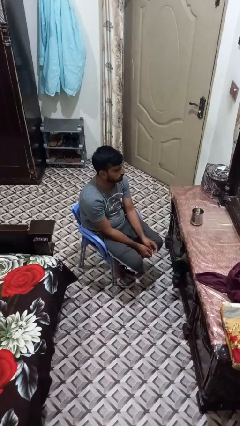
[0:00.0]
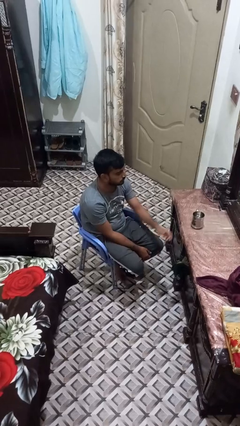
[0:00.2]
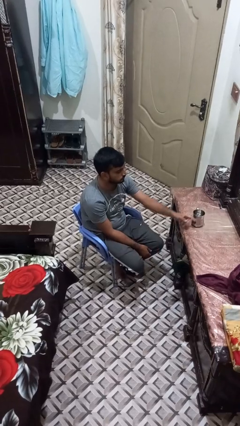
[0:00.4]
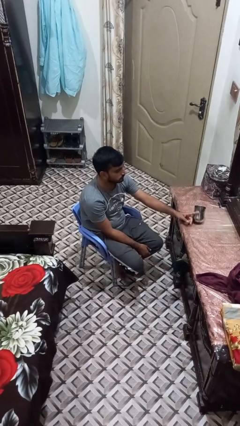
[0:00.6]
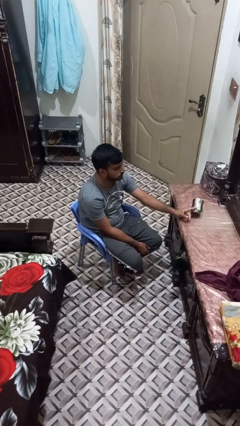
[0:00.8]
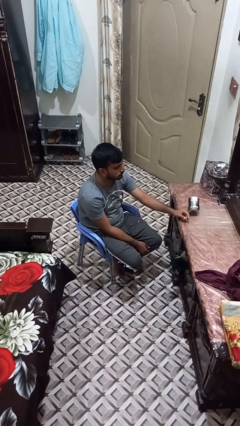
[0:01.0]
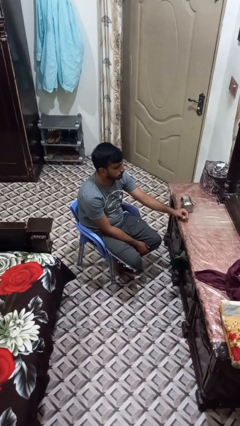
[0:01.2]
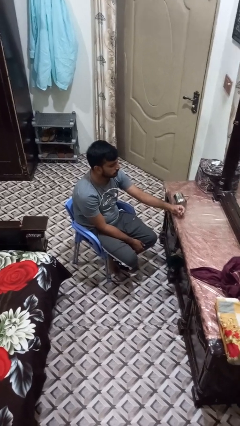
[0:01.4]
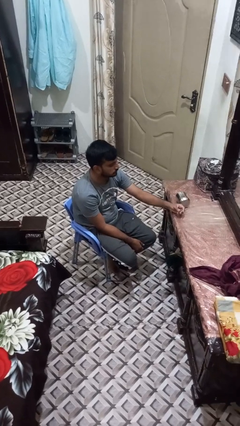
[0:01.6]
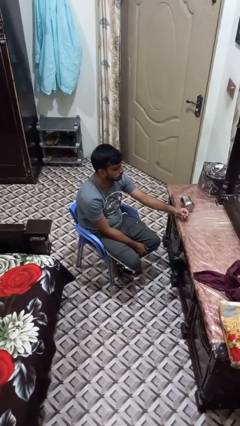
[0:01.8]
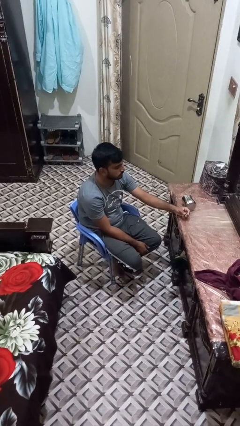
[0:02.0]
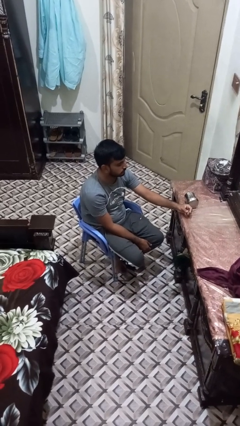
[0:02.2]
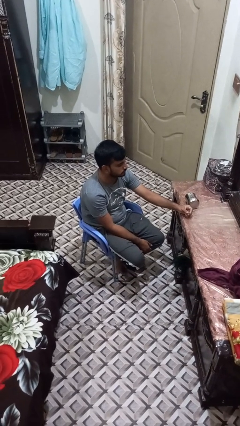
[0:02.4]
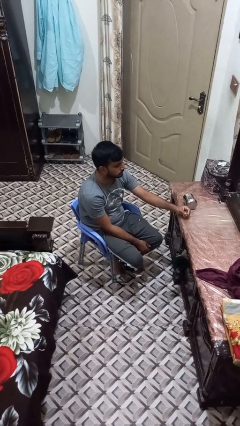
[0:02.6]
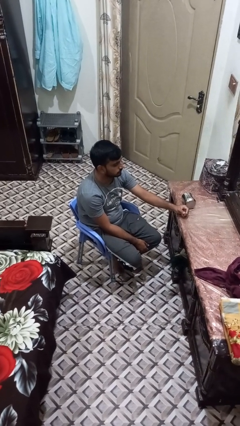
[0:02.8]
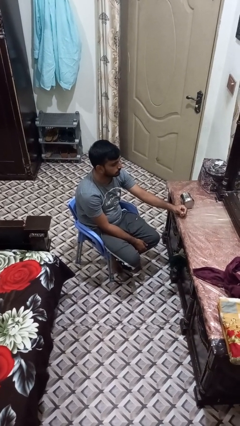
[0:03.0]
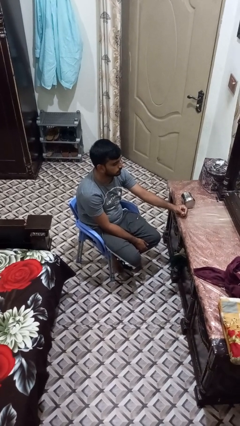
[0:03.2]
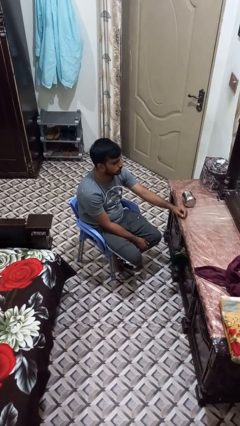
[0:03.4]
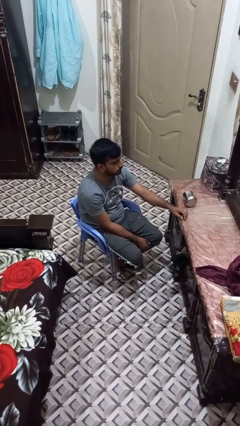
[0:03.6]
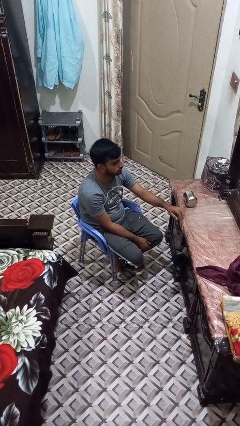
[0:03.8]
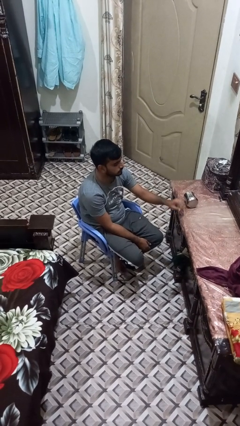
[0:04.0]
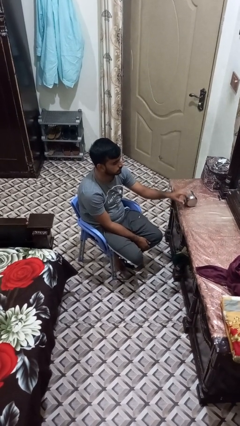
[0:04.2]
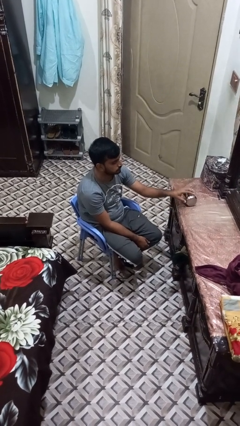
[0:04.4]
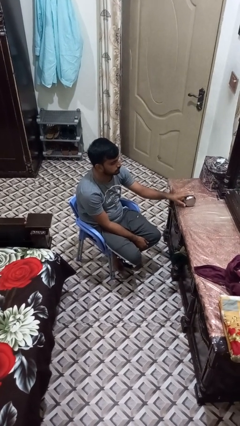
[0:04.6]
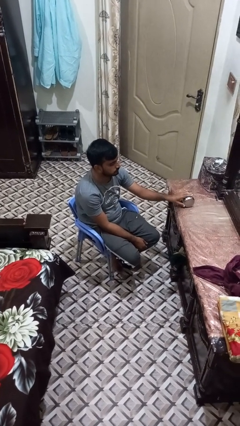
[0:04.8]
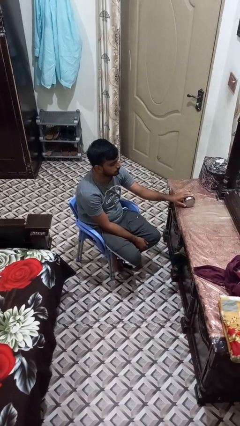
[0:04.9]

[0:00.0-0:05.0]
person knocks over glass

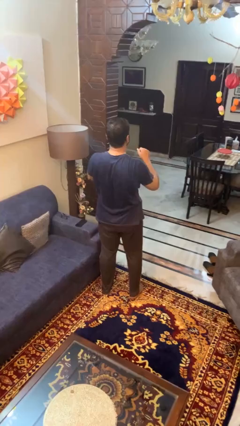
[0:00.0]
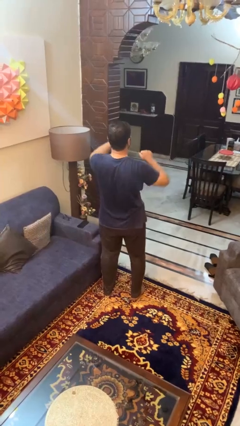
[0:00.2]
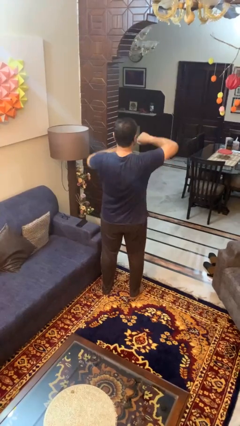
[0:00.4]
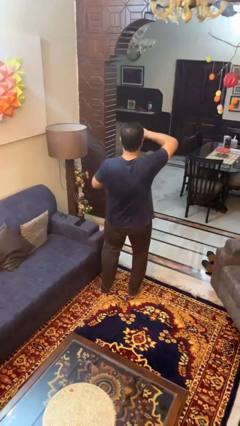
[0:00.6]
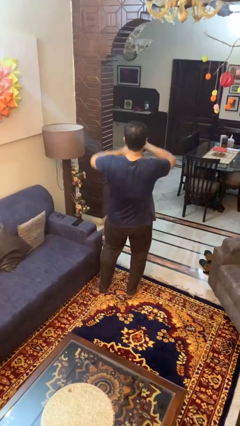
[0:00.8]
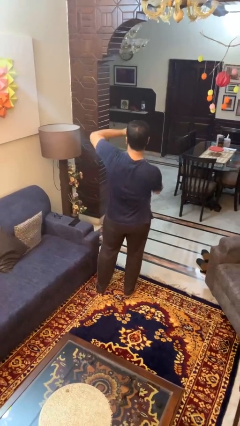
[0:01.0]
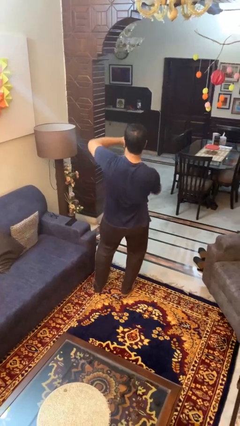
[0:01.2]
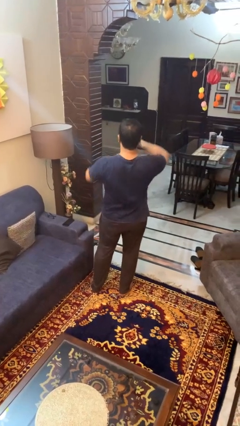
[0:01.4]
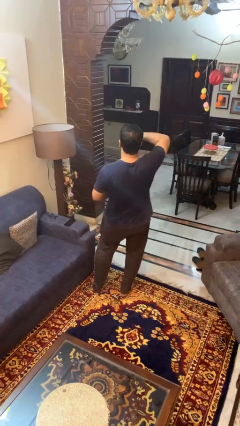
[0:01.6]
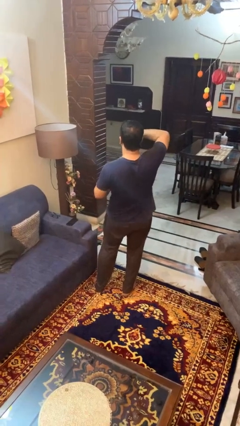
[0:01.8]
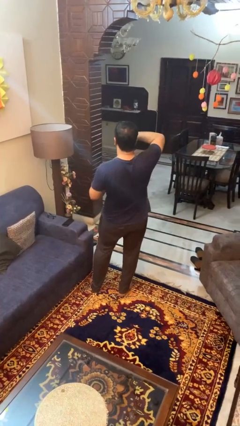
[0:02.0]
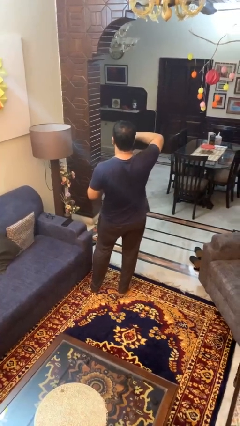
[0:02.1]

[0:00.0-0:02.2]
person dances in place

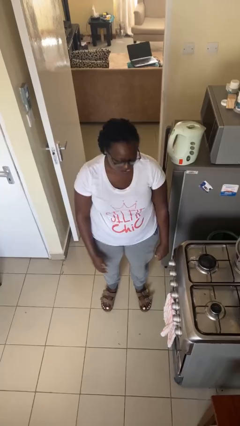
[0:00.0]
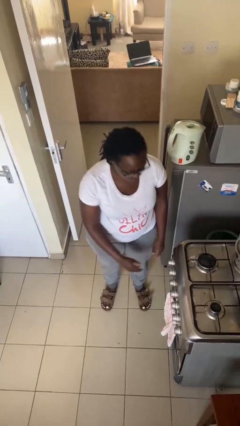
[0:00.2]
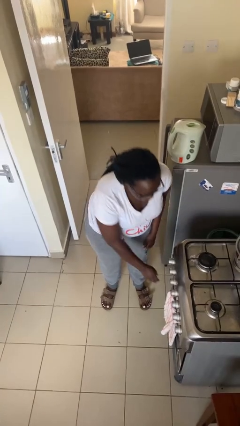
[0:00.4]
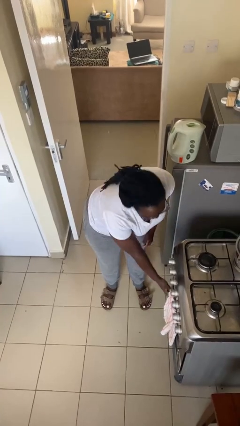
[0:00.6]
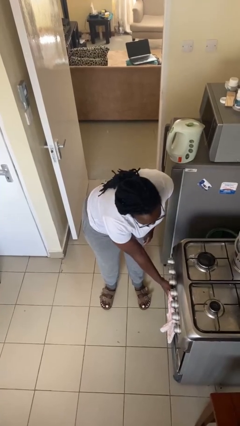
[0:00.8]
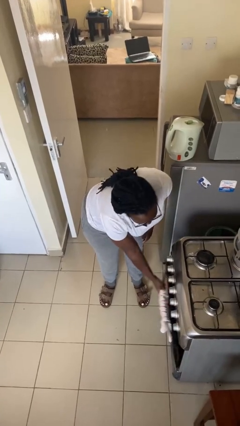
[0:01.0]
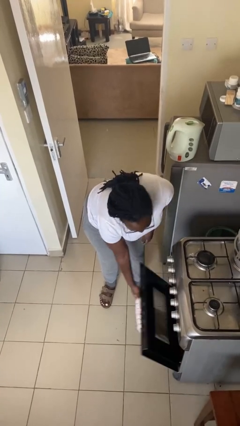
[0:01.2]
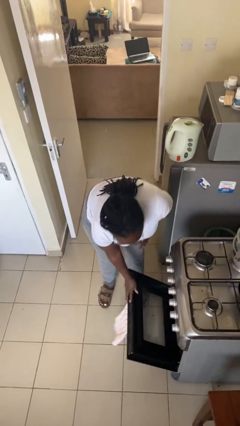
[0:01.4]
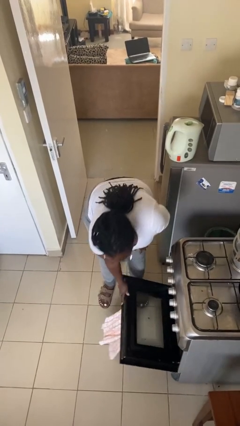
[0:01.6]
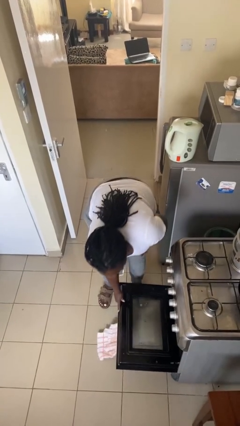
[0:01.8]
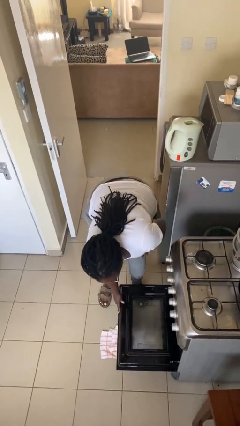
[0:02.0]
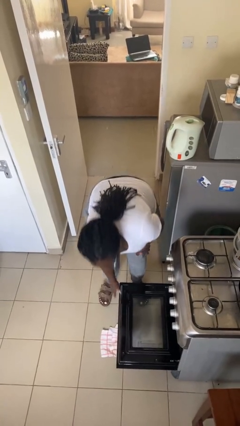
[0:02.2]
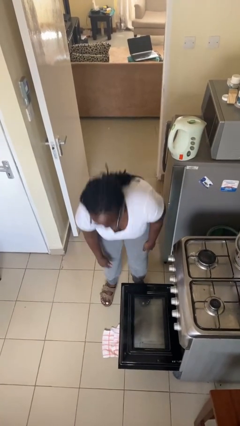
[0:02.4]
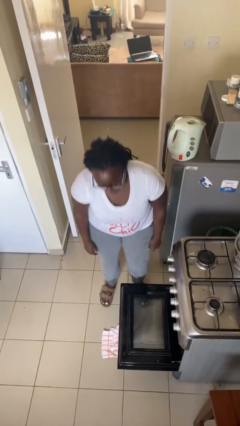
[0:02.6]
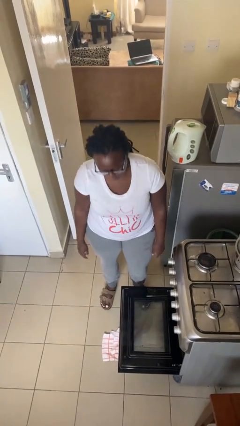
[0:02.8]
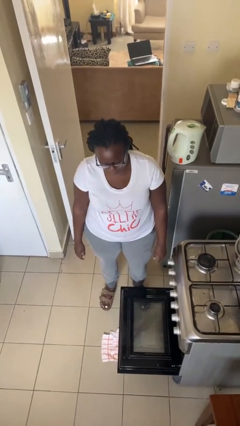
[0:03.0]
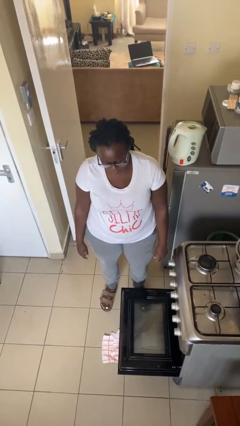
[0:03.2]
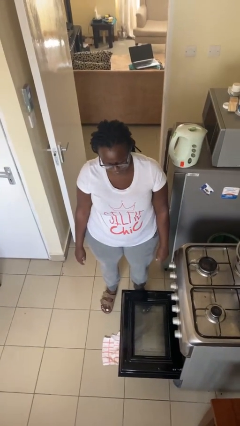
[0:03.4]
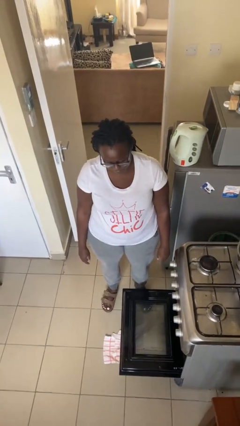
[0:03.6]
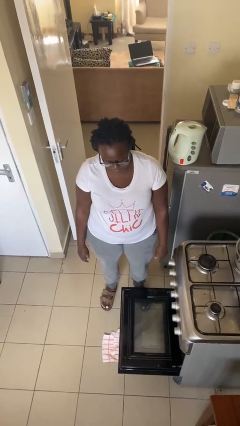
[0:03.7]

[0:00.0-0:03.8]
person opens oven door

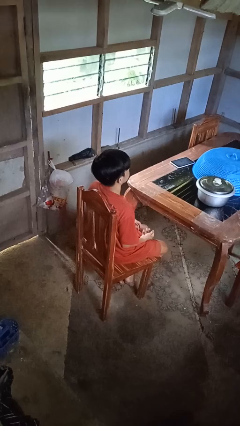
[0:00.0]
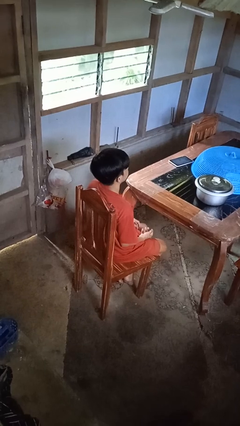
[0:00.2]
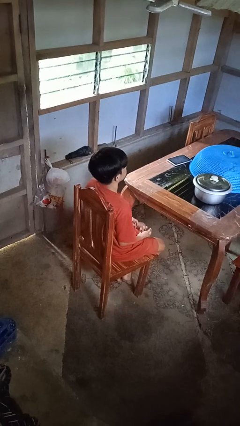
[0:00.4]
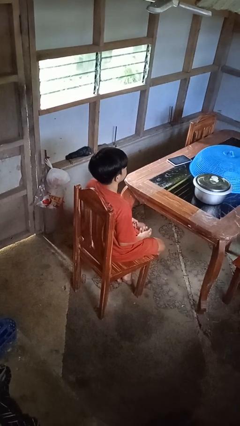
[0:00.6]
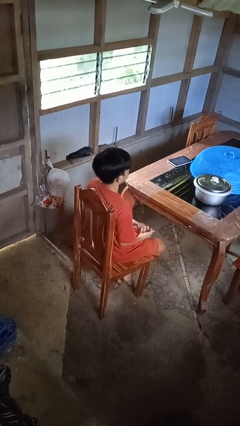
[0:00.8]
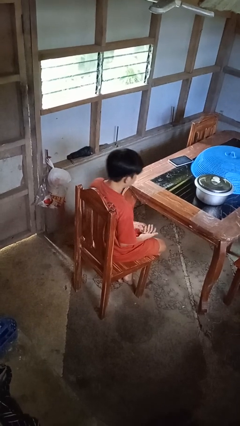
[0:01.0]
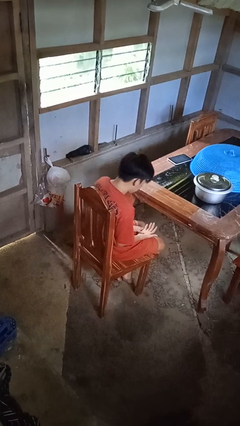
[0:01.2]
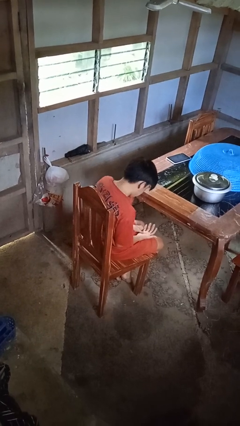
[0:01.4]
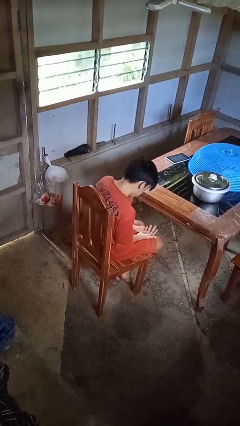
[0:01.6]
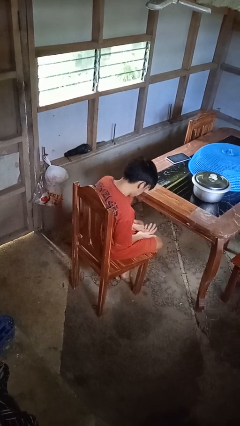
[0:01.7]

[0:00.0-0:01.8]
person looks at hands in lap

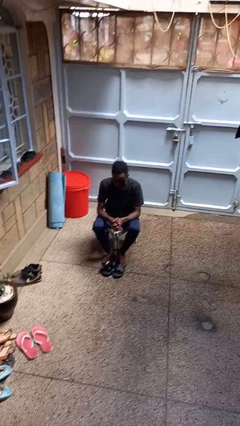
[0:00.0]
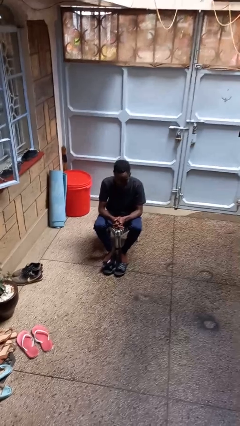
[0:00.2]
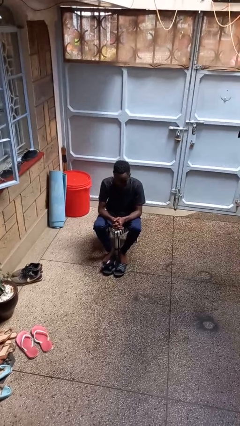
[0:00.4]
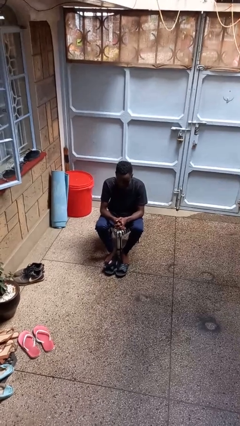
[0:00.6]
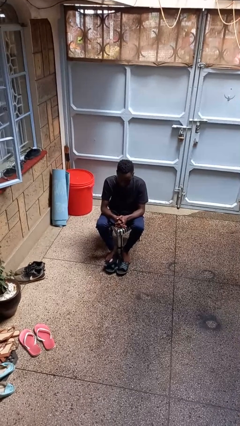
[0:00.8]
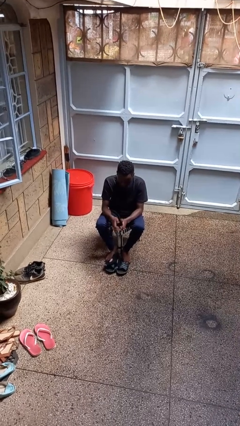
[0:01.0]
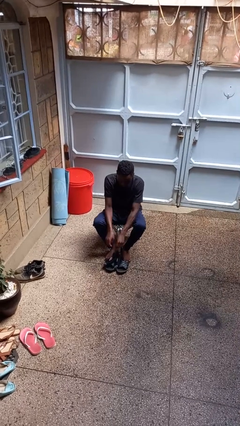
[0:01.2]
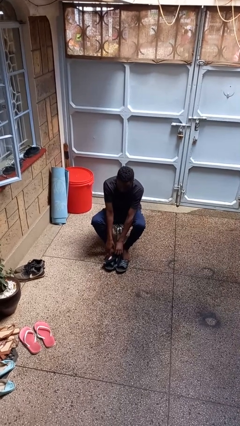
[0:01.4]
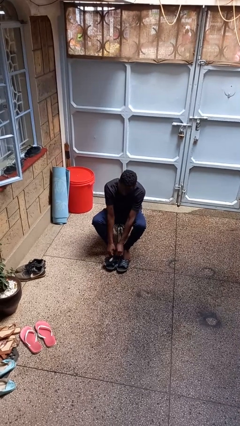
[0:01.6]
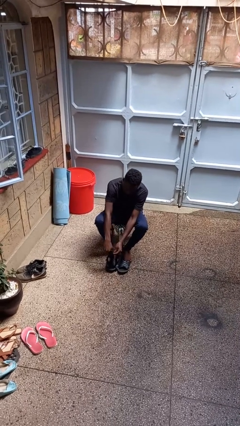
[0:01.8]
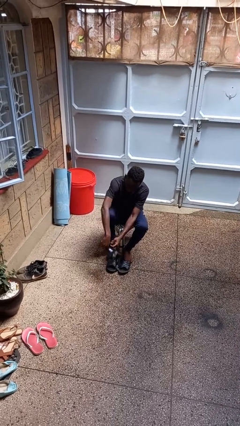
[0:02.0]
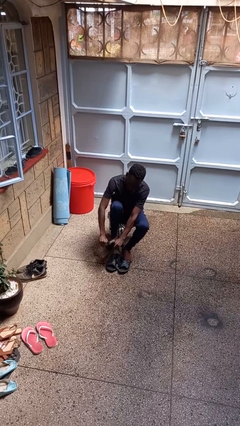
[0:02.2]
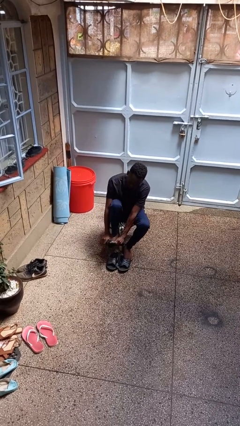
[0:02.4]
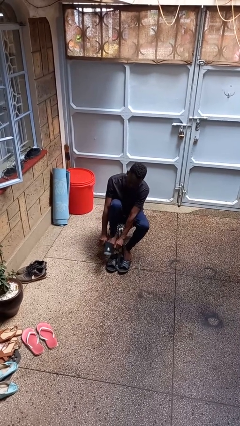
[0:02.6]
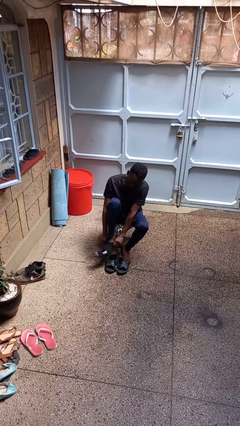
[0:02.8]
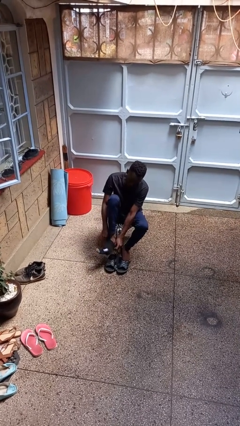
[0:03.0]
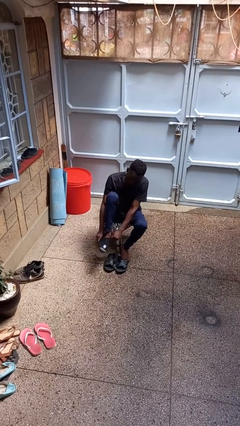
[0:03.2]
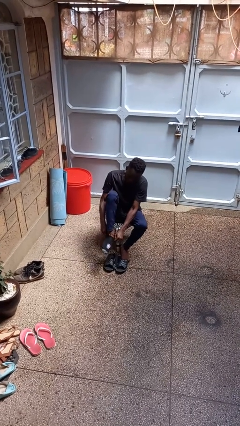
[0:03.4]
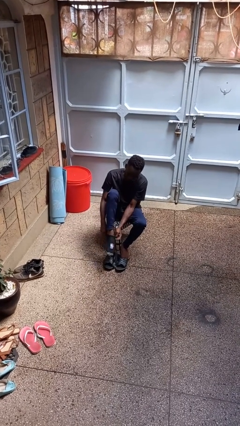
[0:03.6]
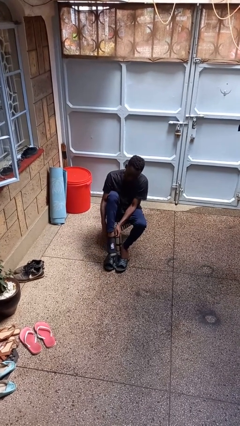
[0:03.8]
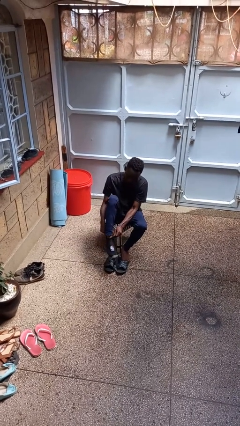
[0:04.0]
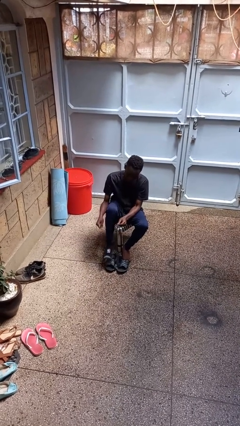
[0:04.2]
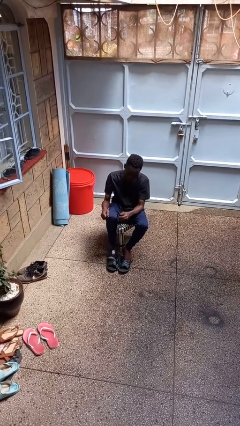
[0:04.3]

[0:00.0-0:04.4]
person puts on socks
